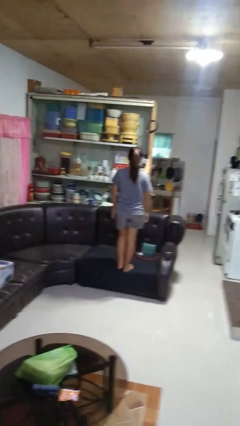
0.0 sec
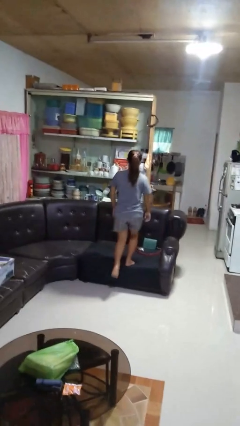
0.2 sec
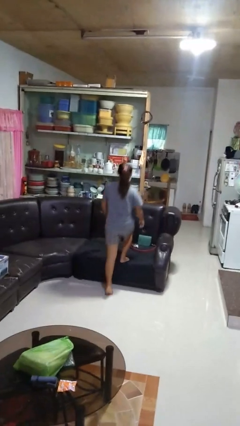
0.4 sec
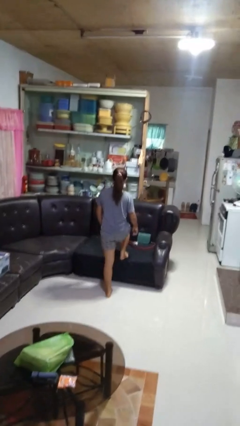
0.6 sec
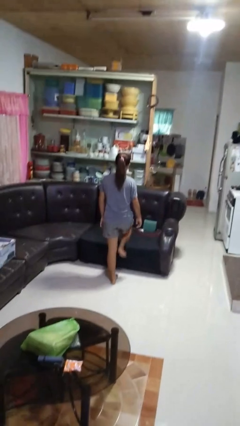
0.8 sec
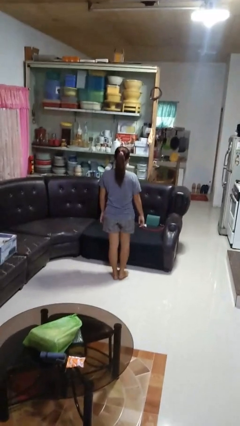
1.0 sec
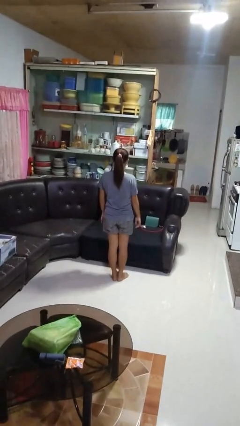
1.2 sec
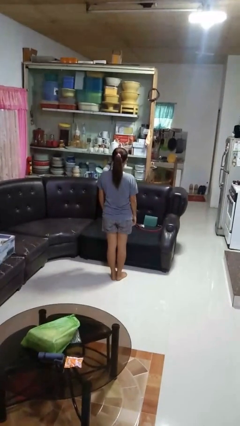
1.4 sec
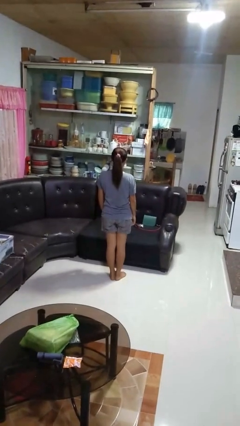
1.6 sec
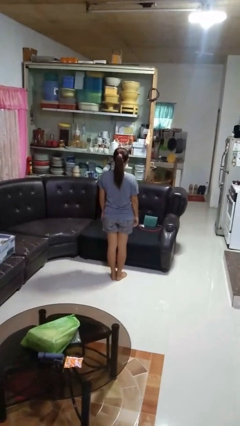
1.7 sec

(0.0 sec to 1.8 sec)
person climbs off couch

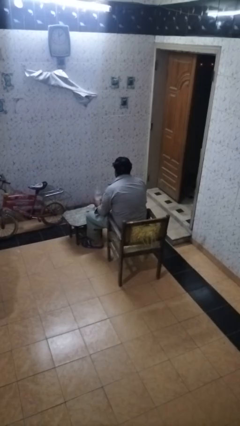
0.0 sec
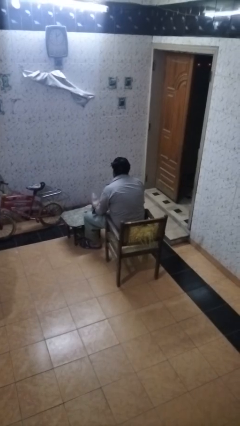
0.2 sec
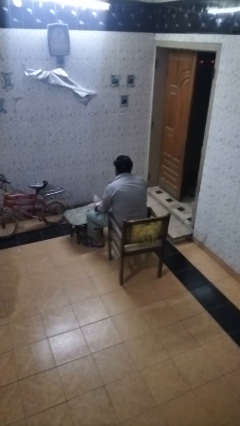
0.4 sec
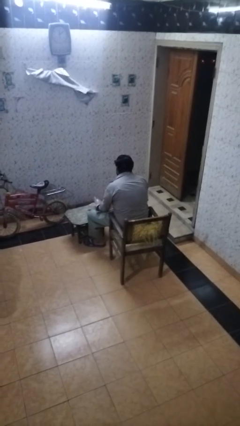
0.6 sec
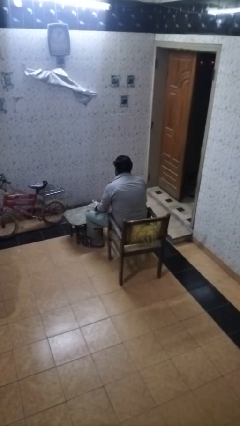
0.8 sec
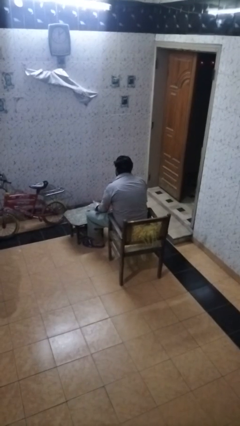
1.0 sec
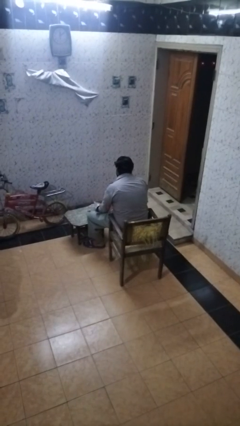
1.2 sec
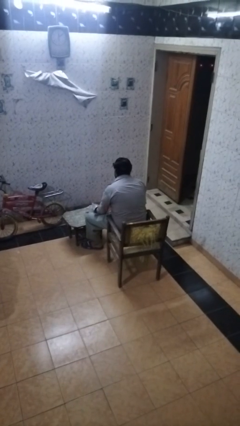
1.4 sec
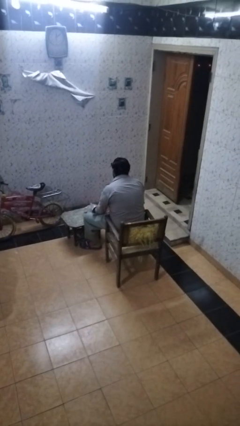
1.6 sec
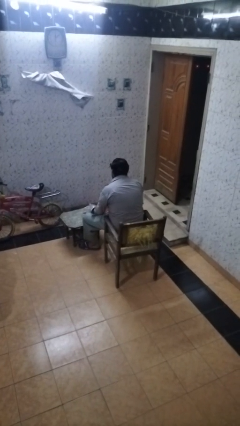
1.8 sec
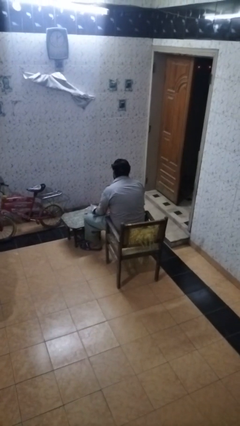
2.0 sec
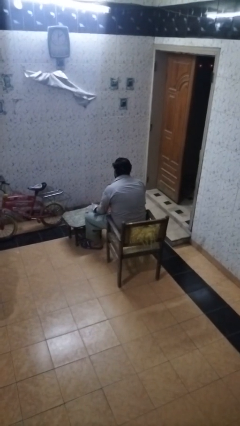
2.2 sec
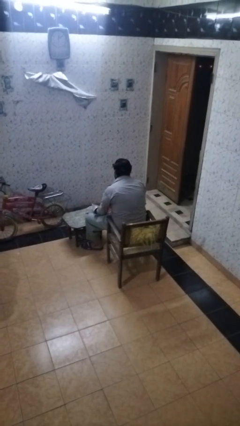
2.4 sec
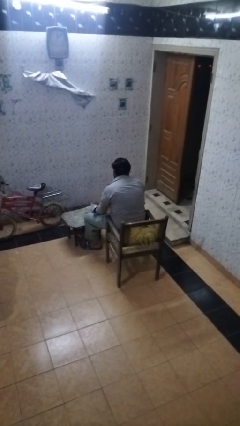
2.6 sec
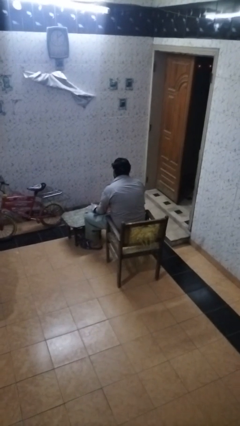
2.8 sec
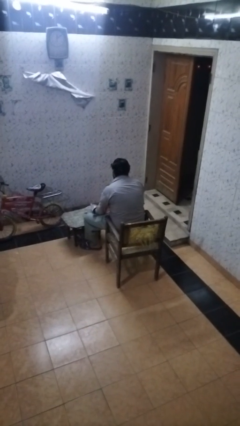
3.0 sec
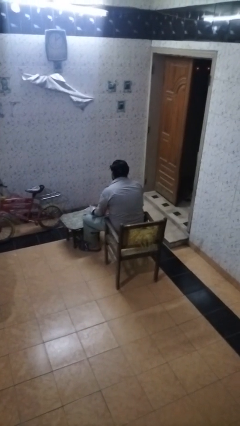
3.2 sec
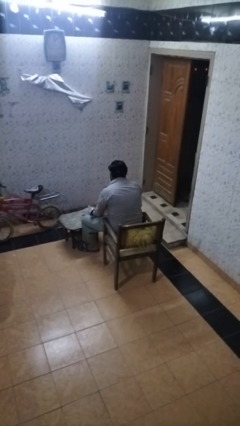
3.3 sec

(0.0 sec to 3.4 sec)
person pours liquid into cup

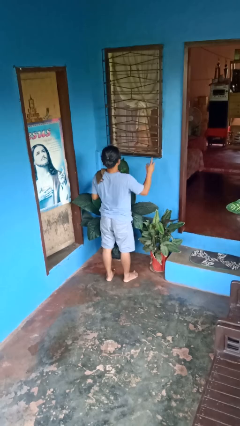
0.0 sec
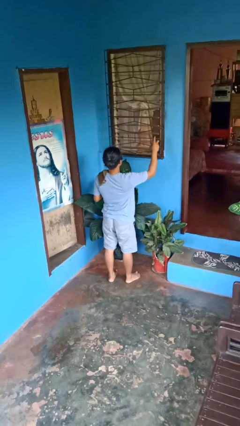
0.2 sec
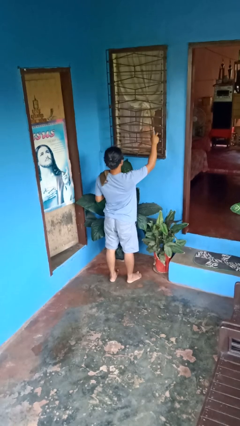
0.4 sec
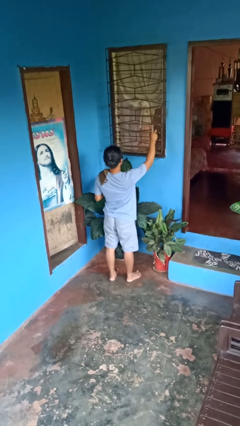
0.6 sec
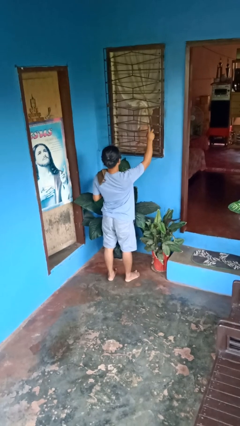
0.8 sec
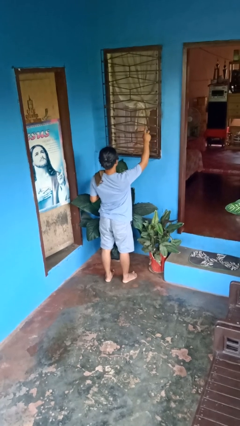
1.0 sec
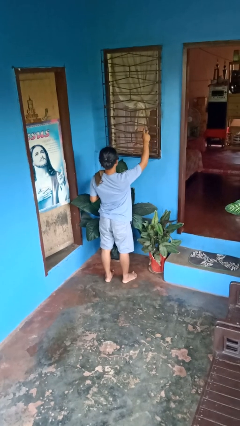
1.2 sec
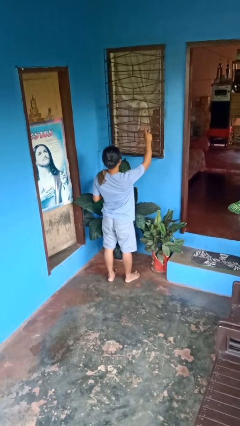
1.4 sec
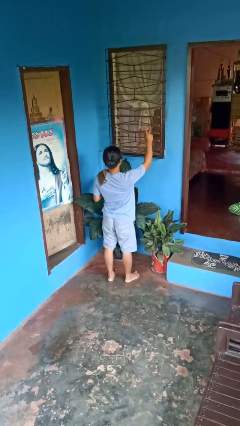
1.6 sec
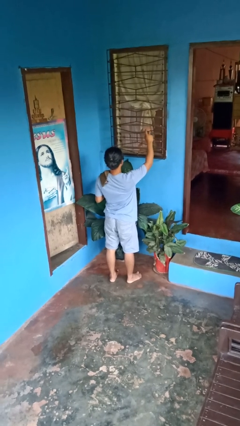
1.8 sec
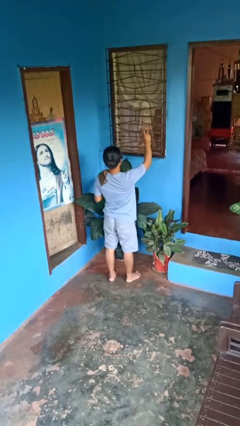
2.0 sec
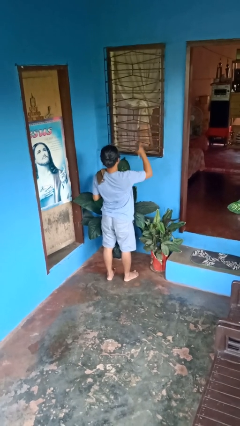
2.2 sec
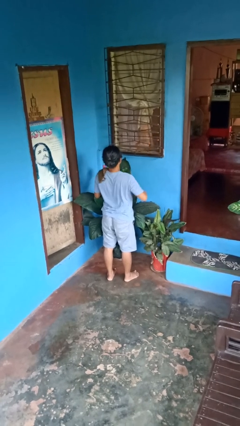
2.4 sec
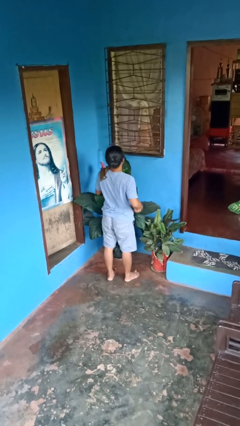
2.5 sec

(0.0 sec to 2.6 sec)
person sprays from bottle

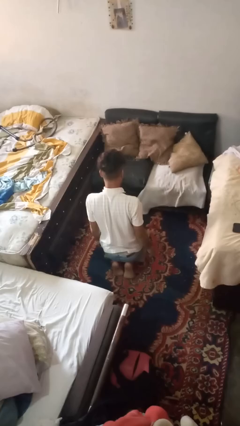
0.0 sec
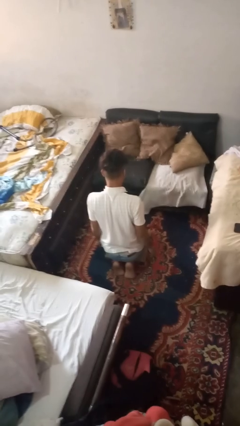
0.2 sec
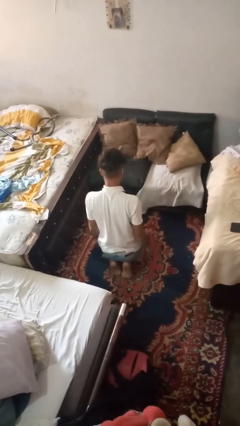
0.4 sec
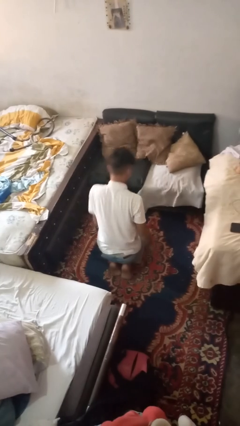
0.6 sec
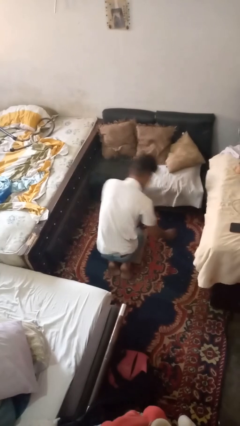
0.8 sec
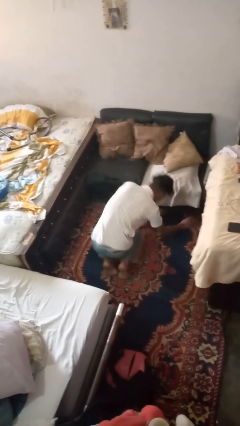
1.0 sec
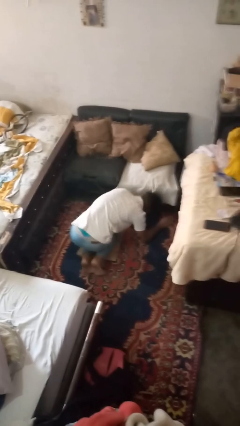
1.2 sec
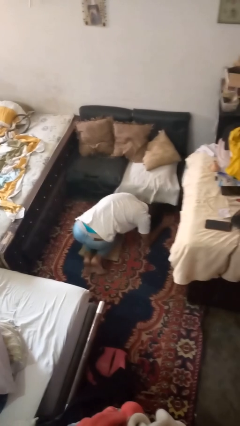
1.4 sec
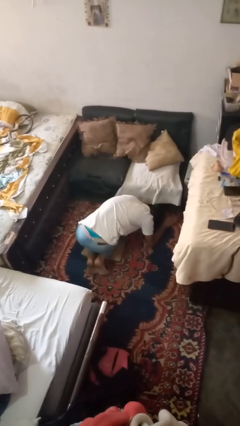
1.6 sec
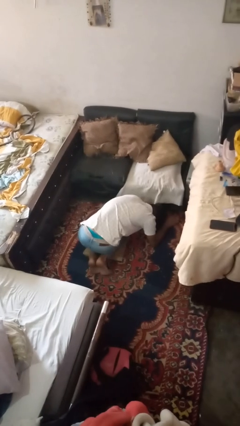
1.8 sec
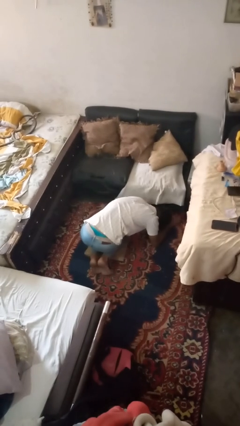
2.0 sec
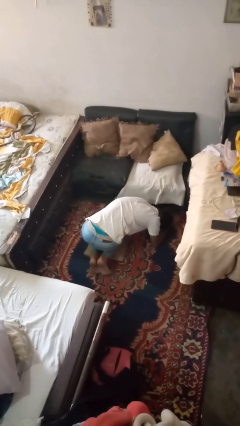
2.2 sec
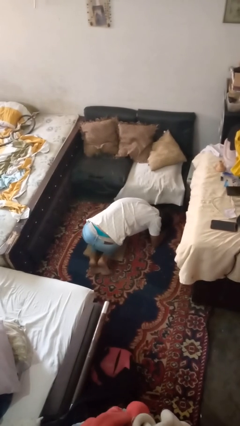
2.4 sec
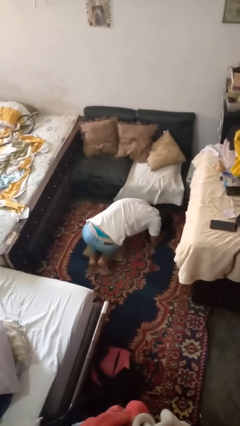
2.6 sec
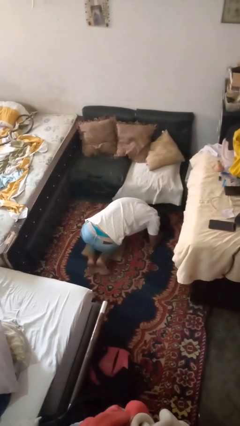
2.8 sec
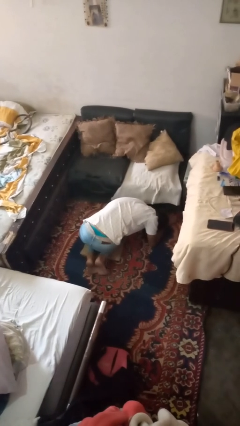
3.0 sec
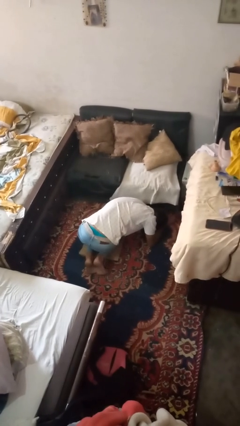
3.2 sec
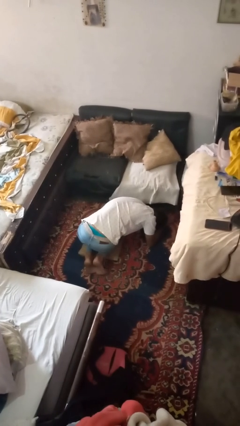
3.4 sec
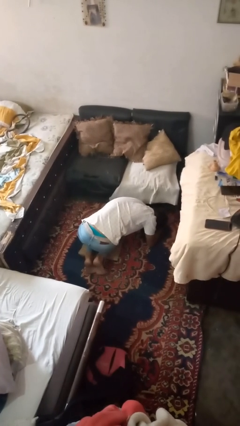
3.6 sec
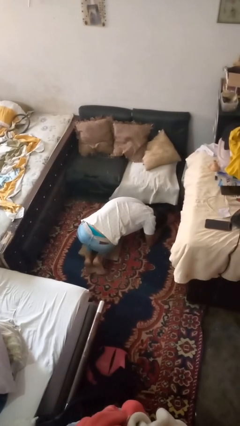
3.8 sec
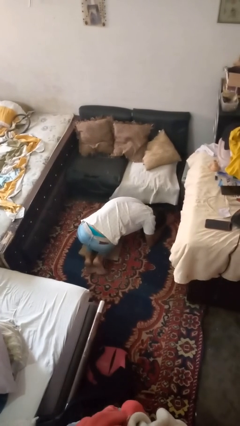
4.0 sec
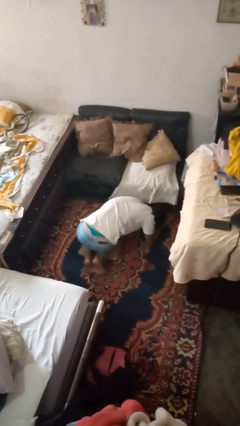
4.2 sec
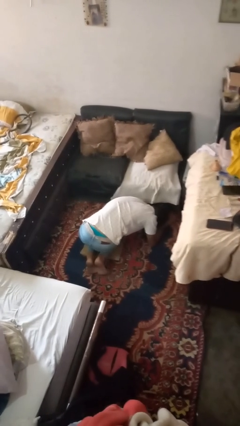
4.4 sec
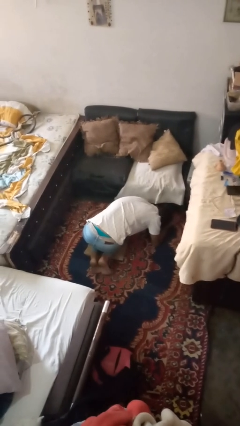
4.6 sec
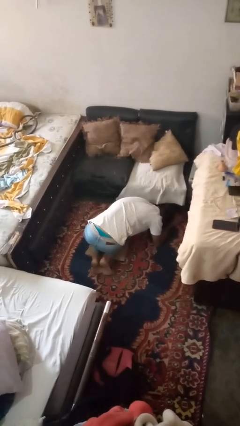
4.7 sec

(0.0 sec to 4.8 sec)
person searches under couch

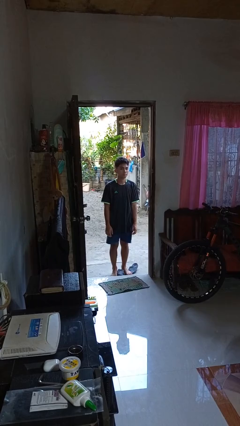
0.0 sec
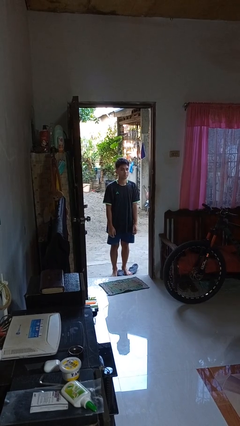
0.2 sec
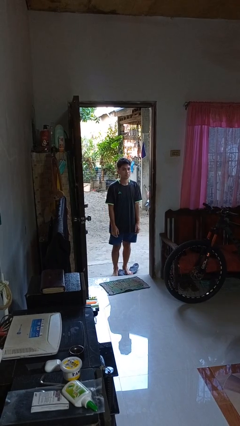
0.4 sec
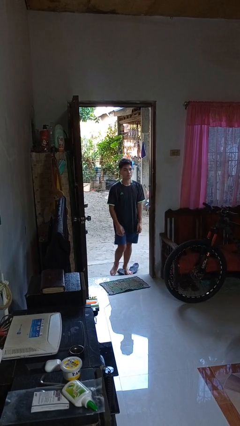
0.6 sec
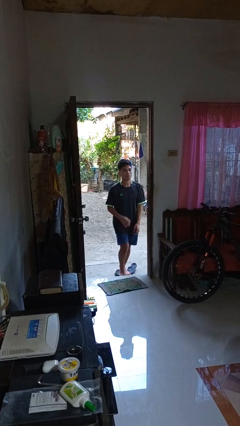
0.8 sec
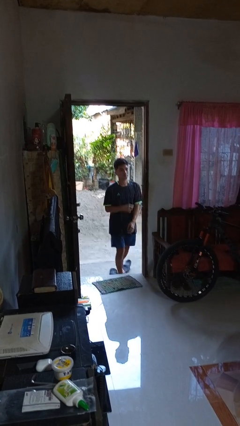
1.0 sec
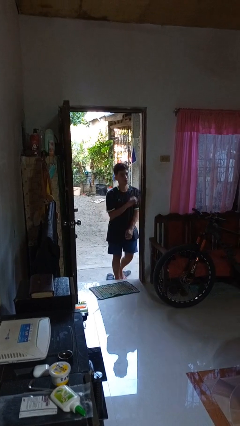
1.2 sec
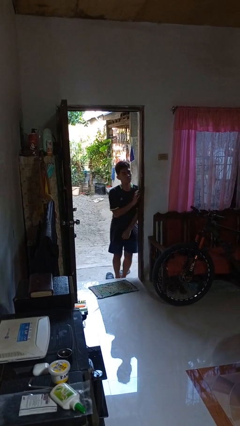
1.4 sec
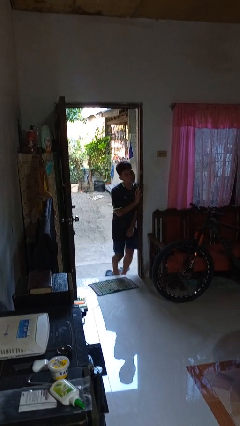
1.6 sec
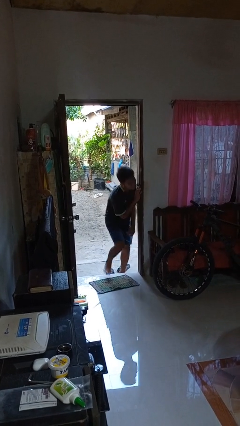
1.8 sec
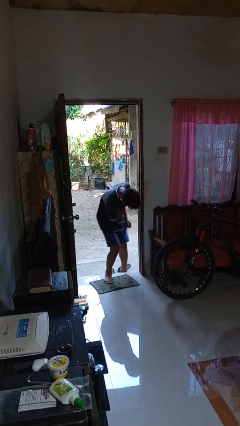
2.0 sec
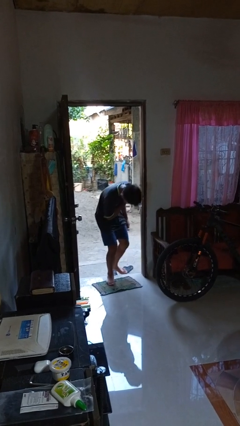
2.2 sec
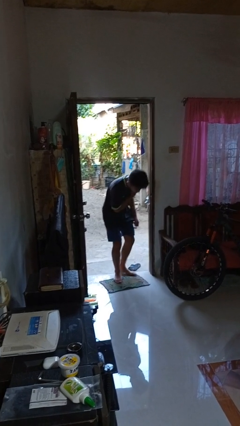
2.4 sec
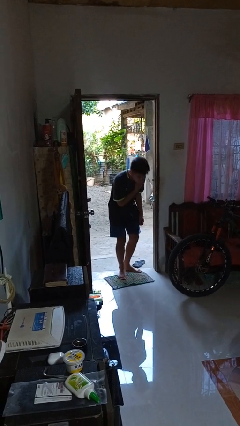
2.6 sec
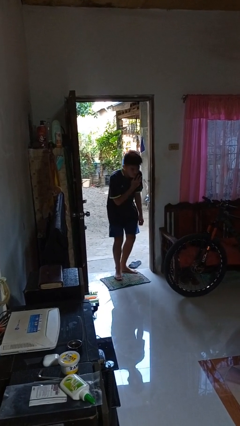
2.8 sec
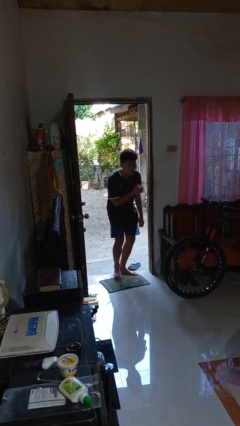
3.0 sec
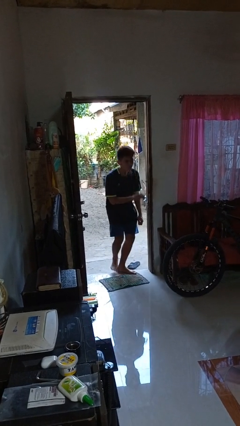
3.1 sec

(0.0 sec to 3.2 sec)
person bumps into wall

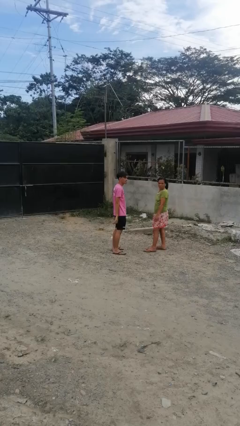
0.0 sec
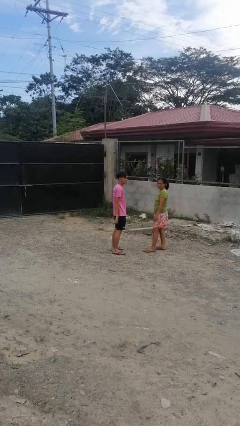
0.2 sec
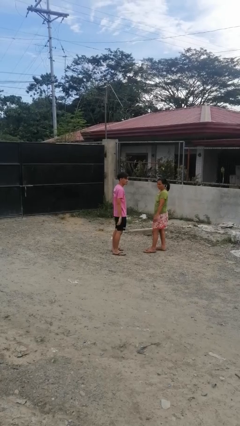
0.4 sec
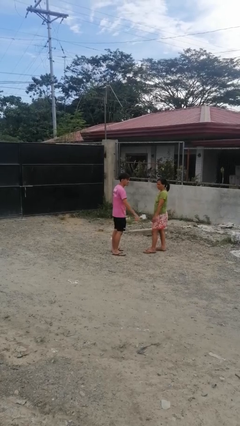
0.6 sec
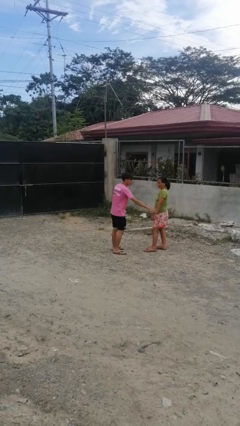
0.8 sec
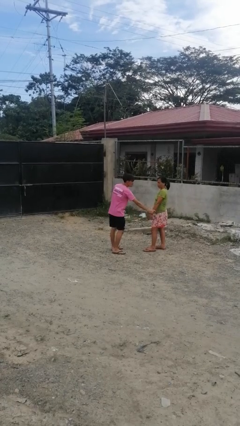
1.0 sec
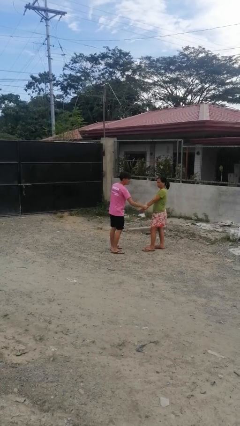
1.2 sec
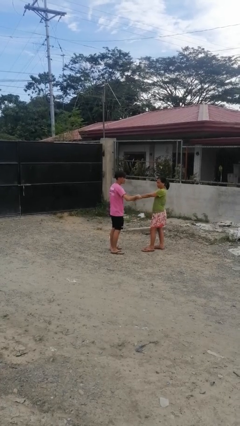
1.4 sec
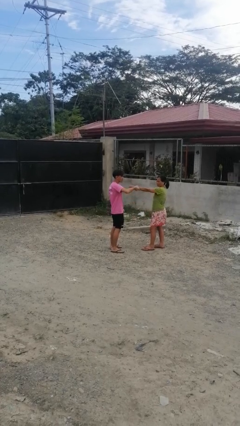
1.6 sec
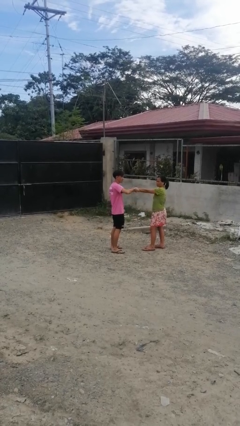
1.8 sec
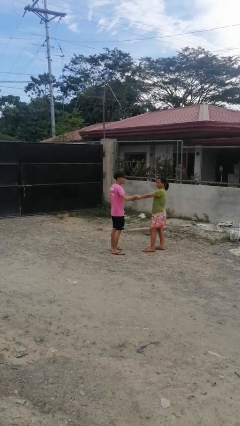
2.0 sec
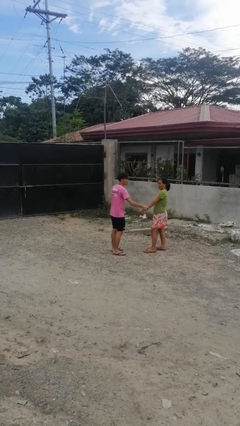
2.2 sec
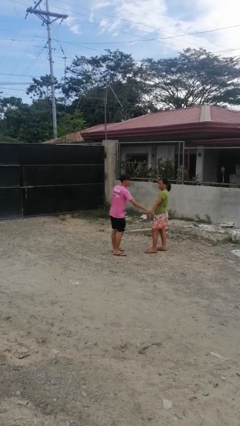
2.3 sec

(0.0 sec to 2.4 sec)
person grabs person by forearm
